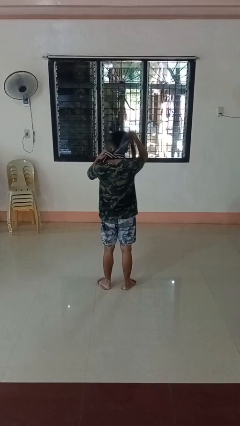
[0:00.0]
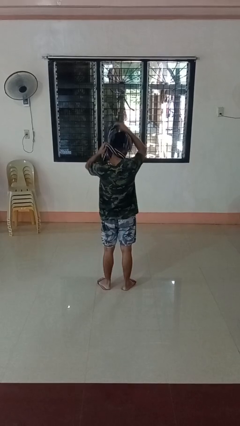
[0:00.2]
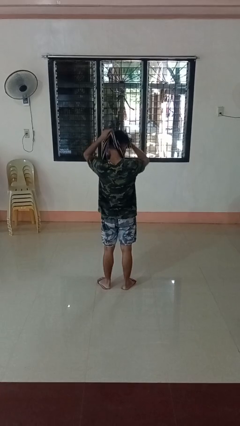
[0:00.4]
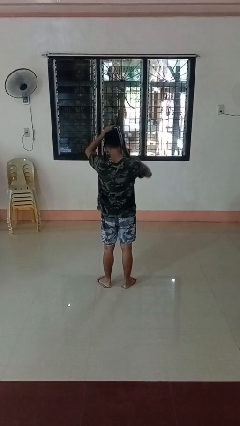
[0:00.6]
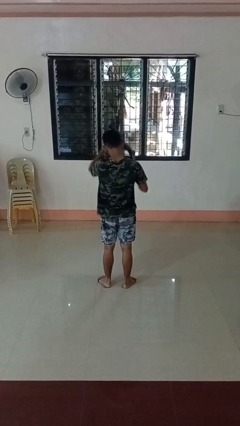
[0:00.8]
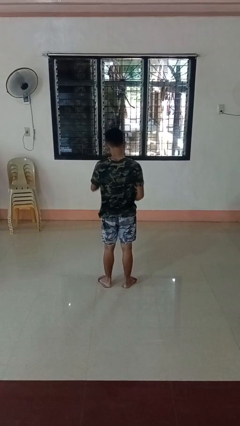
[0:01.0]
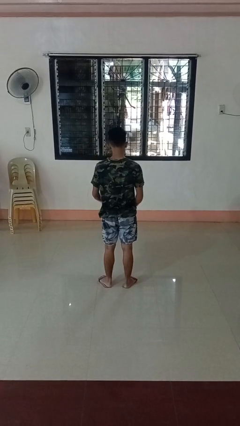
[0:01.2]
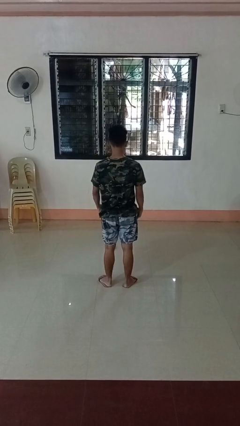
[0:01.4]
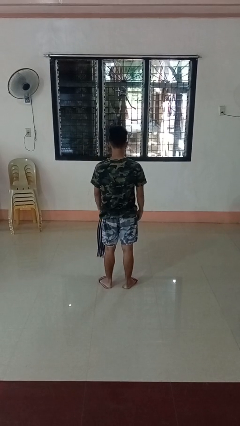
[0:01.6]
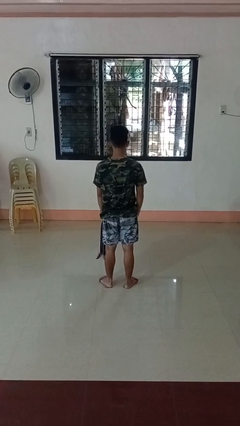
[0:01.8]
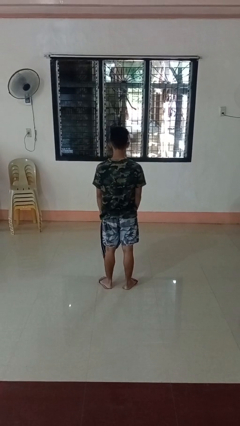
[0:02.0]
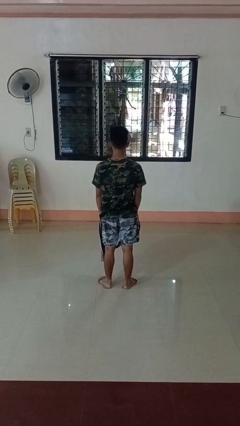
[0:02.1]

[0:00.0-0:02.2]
person takes off scarf

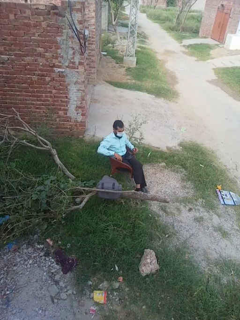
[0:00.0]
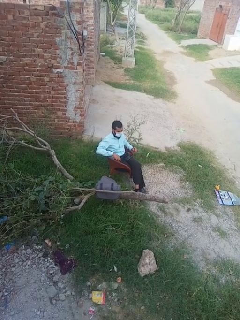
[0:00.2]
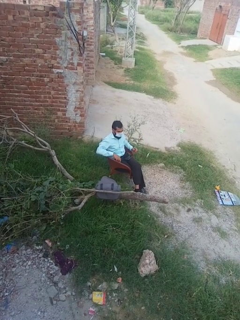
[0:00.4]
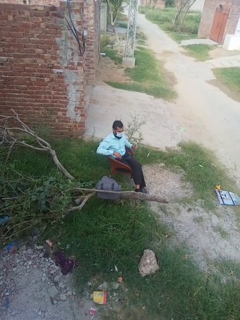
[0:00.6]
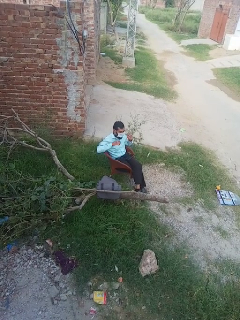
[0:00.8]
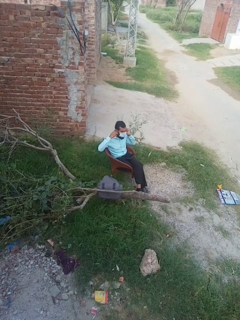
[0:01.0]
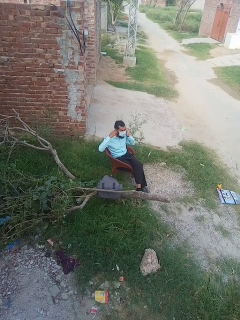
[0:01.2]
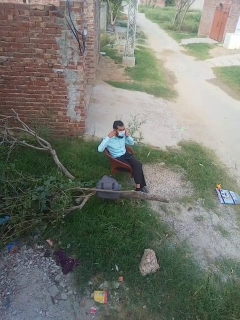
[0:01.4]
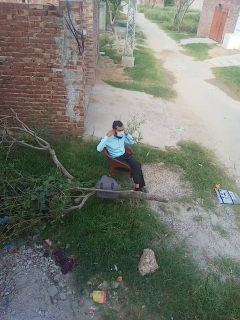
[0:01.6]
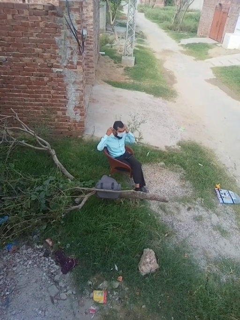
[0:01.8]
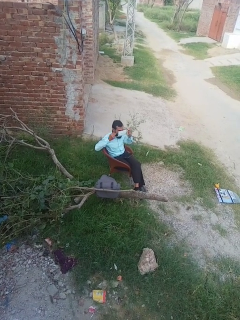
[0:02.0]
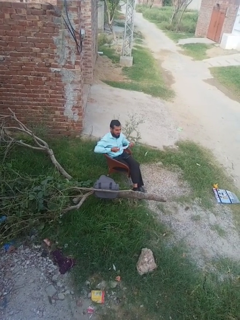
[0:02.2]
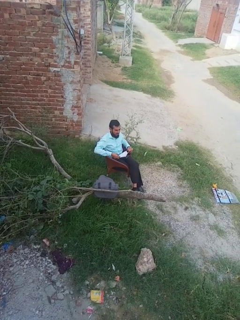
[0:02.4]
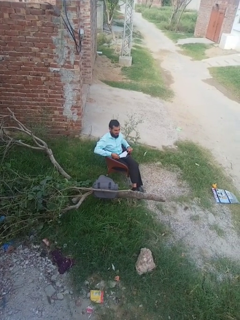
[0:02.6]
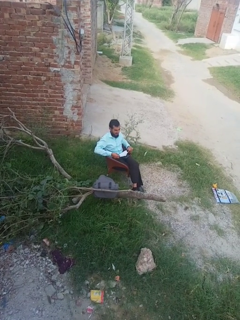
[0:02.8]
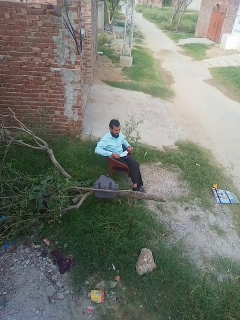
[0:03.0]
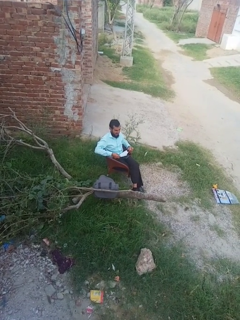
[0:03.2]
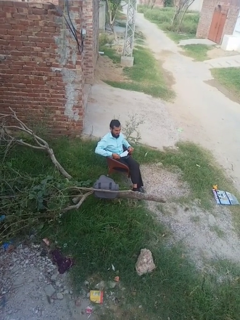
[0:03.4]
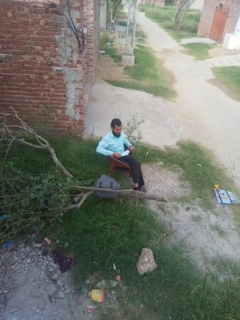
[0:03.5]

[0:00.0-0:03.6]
person takes off facemask

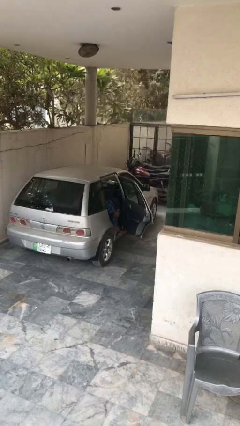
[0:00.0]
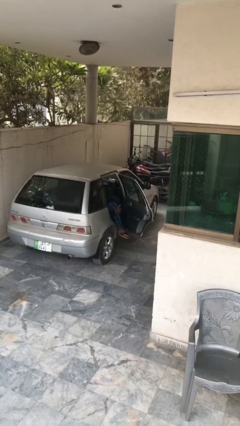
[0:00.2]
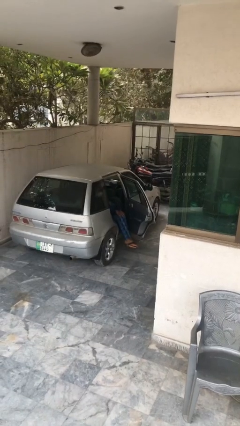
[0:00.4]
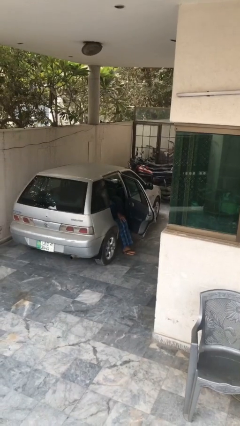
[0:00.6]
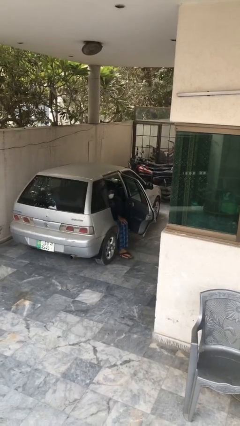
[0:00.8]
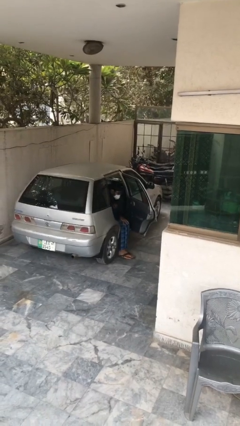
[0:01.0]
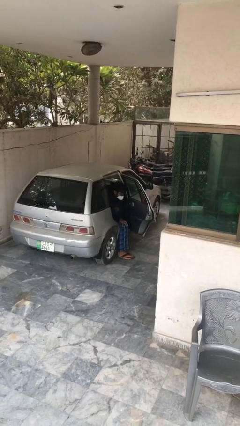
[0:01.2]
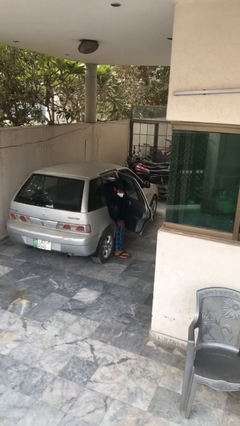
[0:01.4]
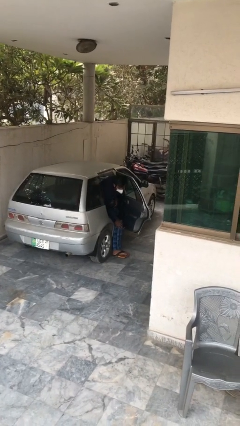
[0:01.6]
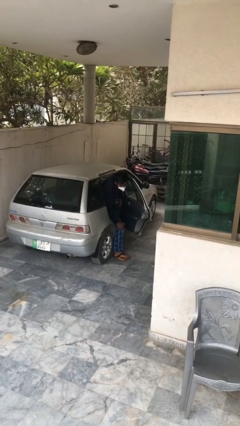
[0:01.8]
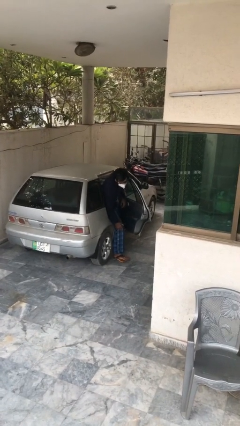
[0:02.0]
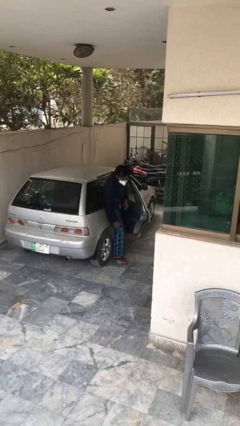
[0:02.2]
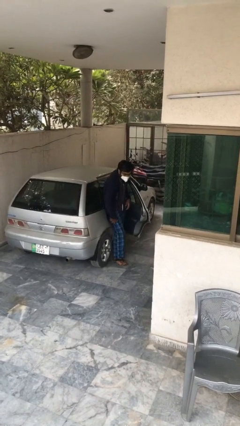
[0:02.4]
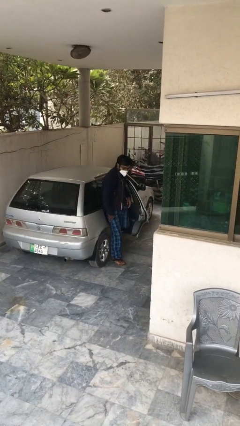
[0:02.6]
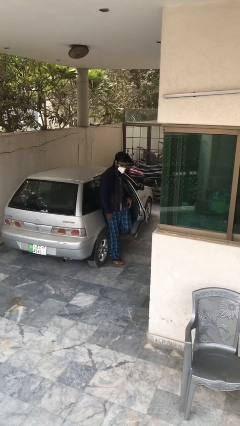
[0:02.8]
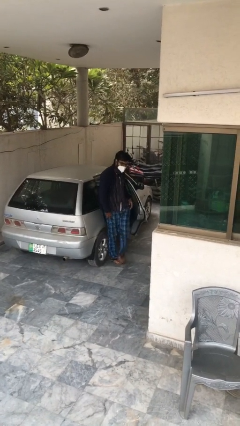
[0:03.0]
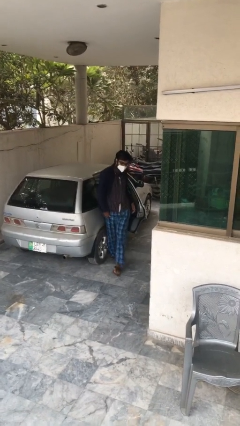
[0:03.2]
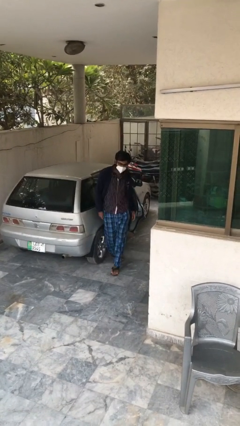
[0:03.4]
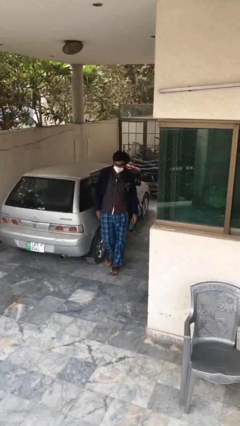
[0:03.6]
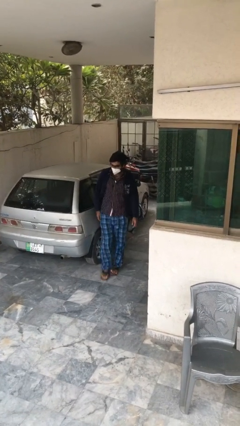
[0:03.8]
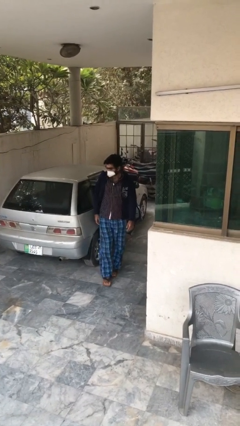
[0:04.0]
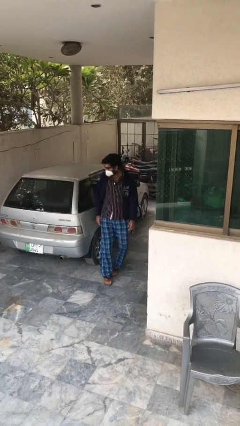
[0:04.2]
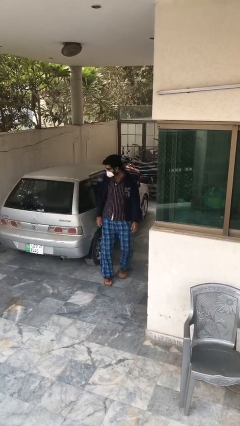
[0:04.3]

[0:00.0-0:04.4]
person exits car

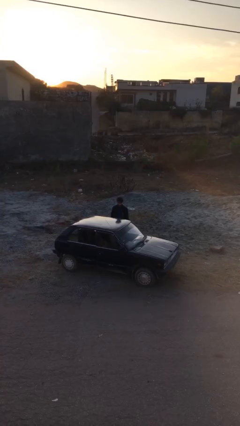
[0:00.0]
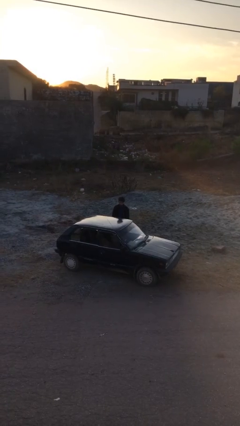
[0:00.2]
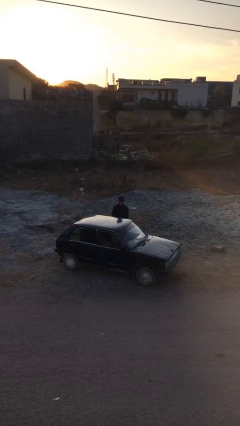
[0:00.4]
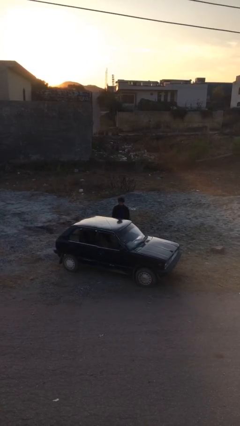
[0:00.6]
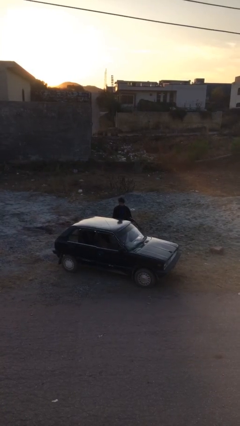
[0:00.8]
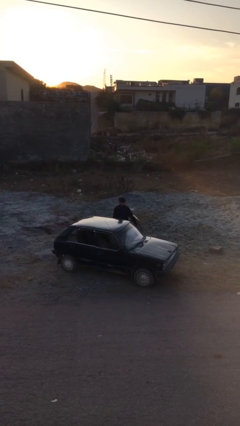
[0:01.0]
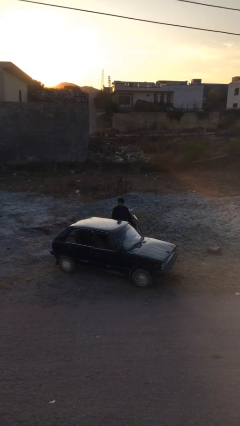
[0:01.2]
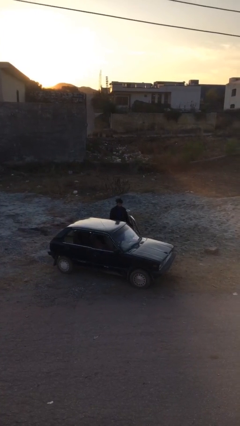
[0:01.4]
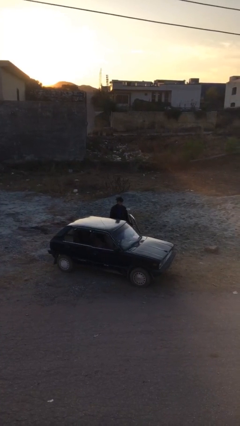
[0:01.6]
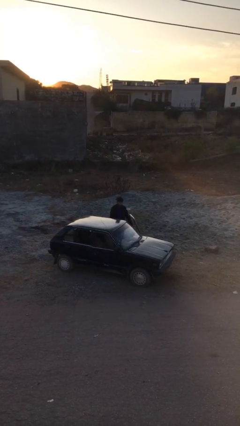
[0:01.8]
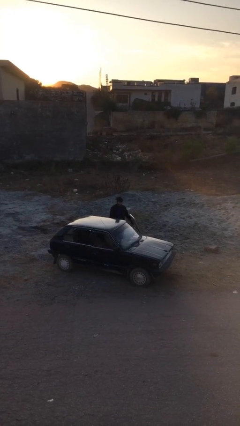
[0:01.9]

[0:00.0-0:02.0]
person opens car door

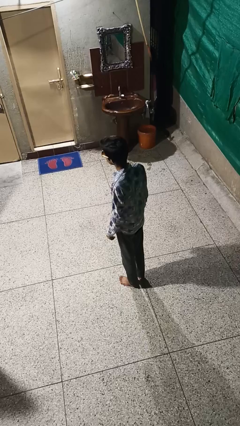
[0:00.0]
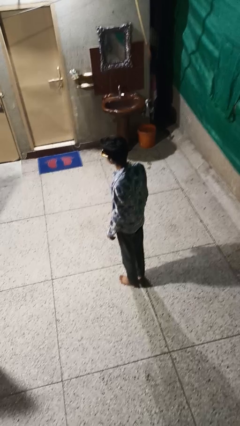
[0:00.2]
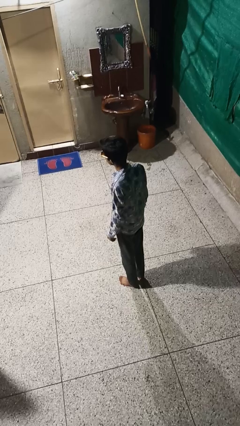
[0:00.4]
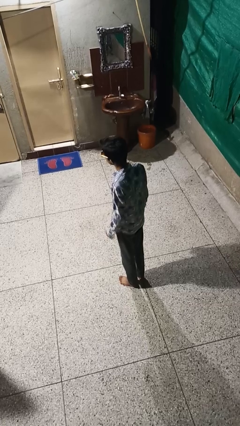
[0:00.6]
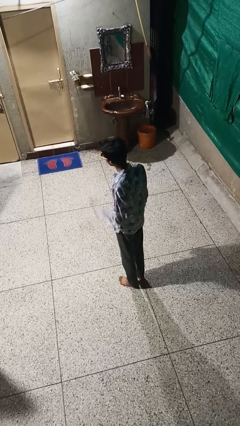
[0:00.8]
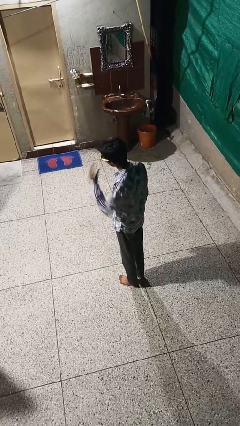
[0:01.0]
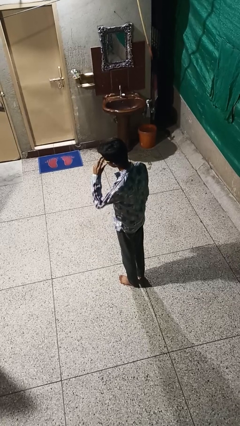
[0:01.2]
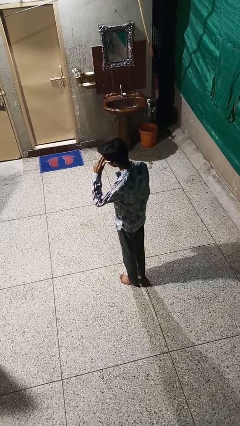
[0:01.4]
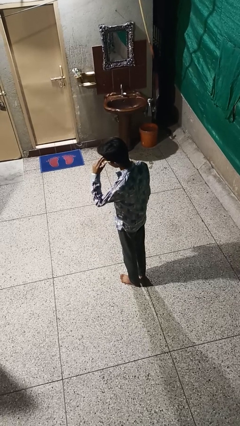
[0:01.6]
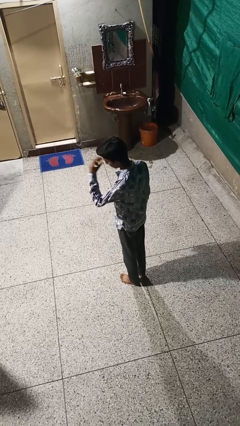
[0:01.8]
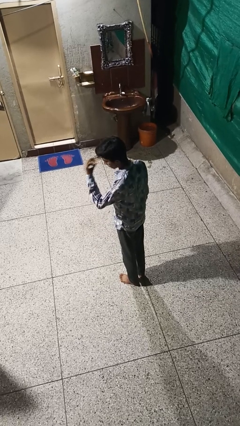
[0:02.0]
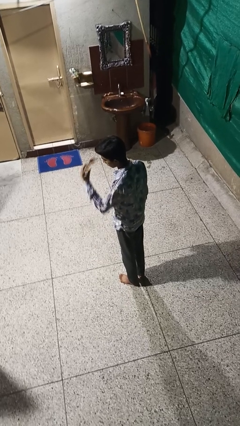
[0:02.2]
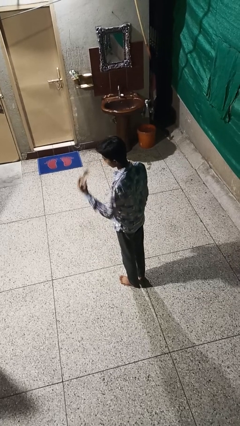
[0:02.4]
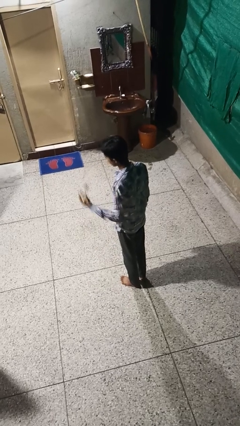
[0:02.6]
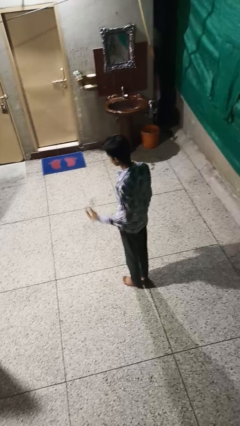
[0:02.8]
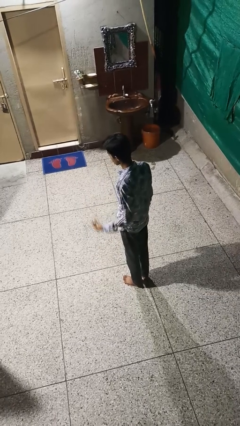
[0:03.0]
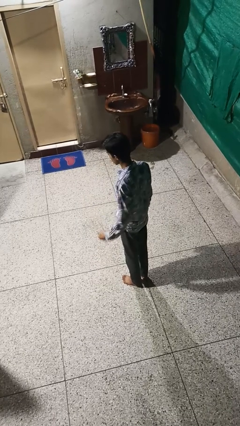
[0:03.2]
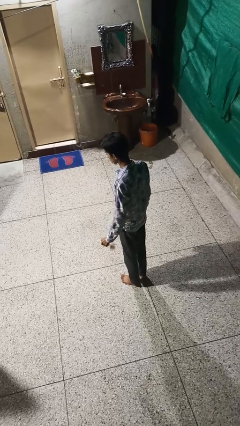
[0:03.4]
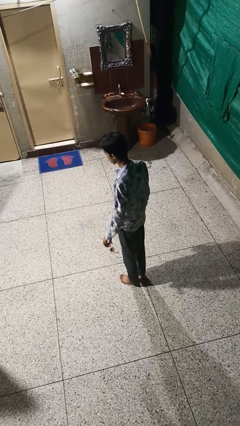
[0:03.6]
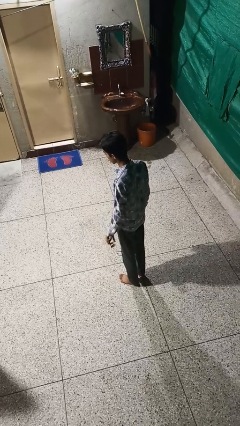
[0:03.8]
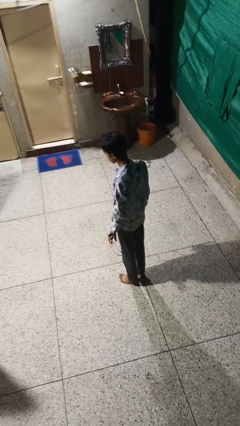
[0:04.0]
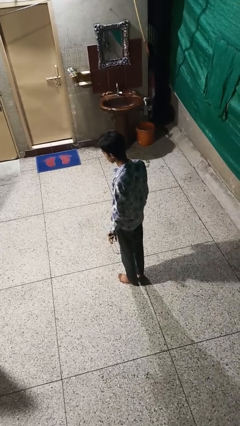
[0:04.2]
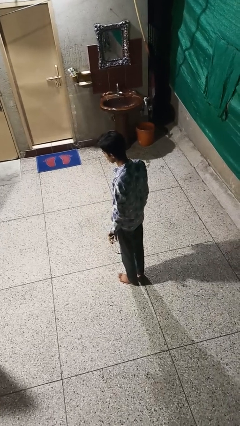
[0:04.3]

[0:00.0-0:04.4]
person takes off sunglasses

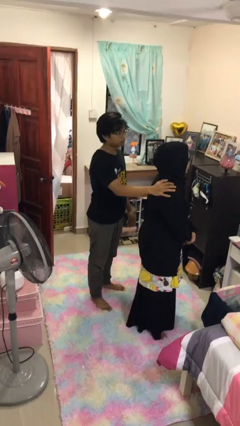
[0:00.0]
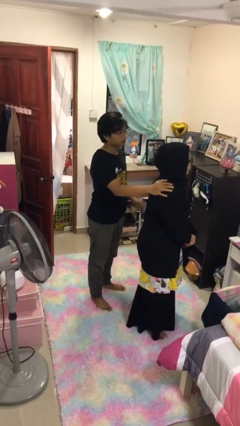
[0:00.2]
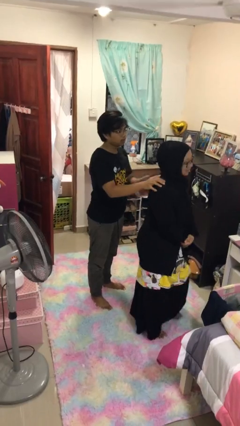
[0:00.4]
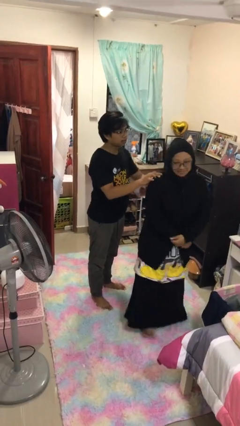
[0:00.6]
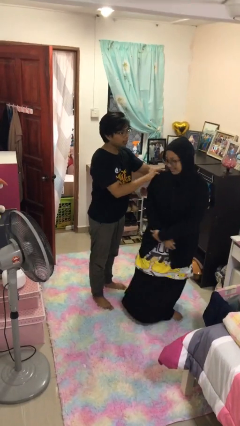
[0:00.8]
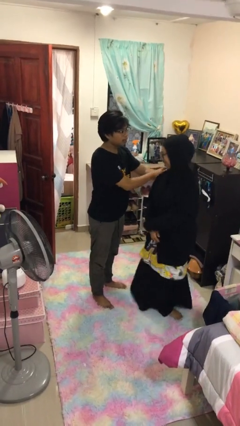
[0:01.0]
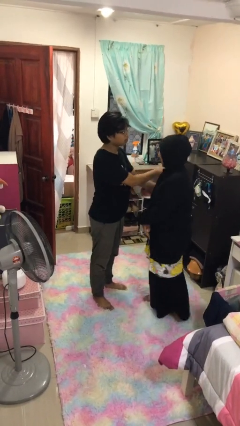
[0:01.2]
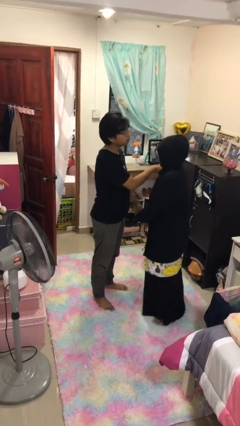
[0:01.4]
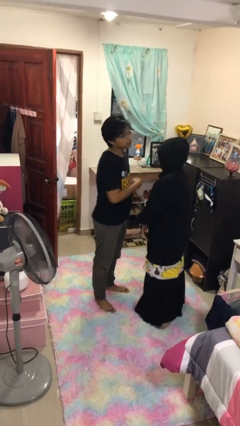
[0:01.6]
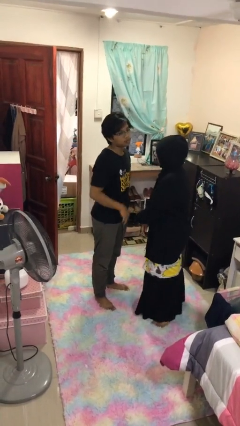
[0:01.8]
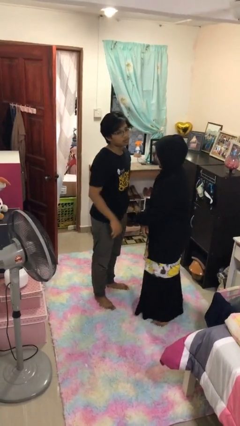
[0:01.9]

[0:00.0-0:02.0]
person spins person around
